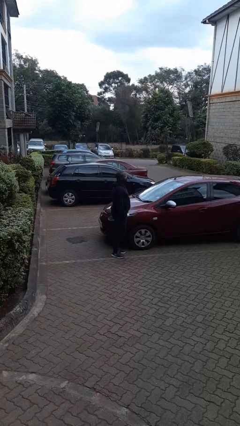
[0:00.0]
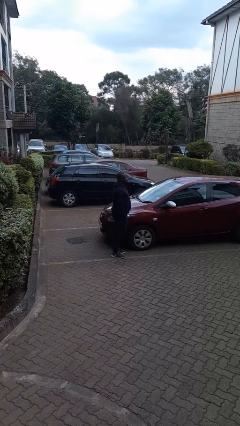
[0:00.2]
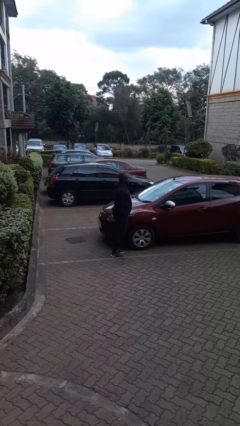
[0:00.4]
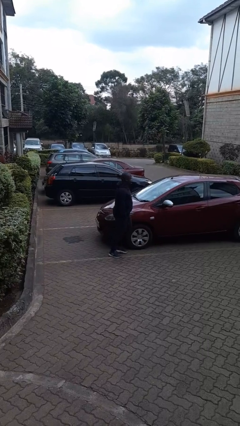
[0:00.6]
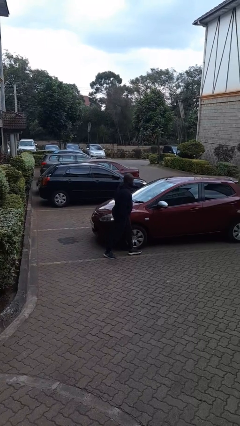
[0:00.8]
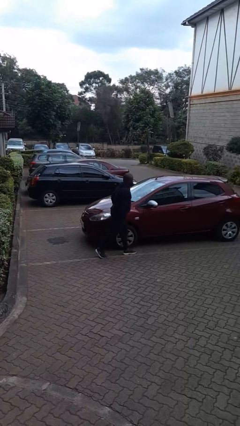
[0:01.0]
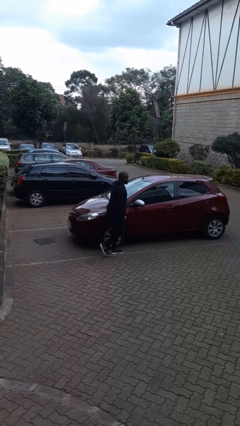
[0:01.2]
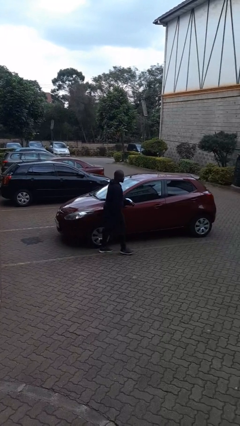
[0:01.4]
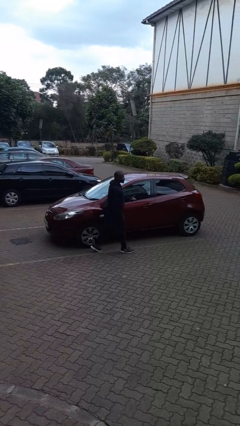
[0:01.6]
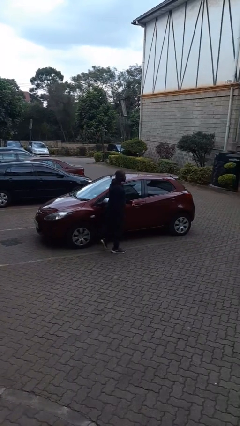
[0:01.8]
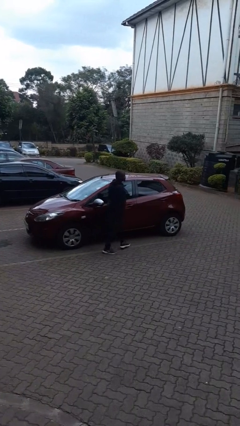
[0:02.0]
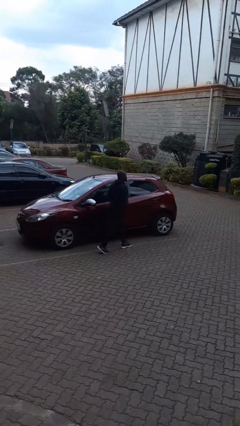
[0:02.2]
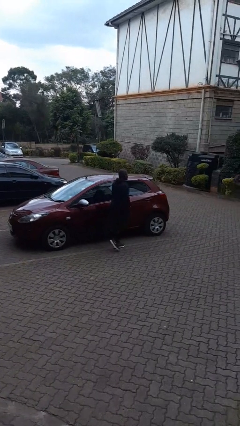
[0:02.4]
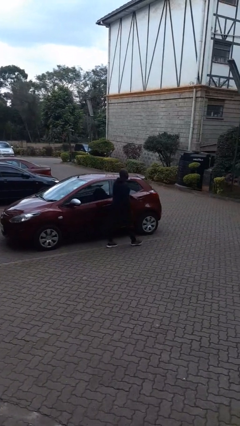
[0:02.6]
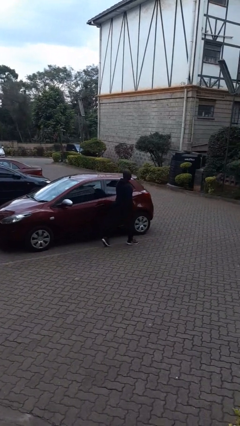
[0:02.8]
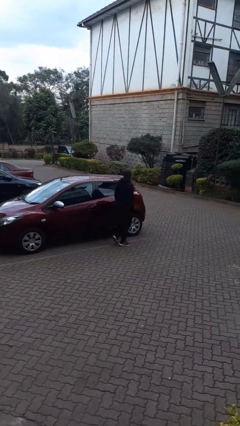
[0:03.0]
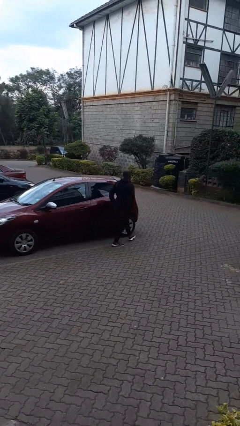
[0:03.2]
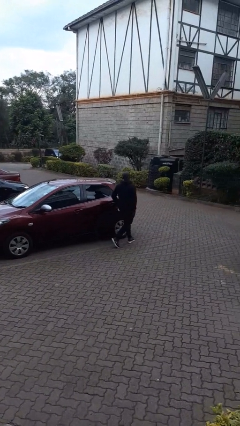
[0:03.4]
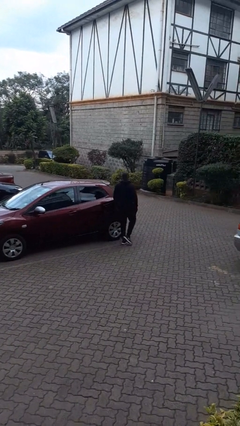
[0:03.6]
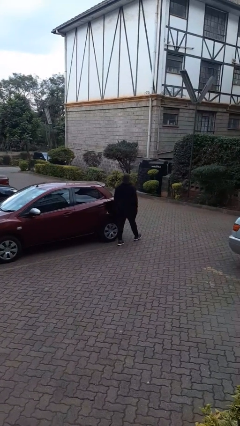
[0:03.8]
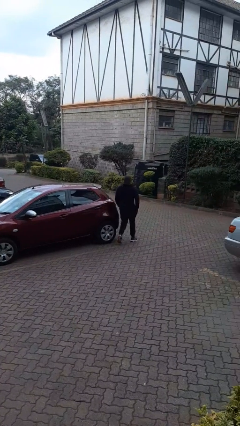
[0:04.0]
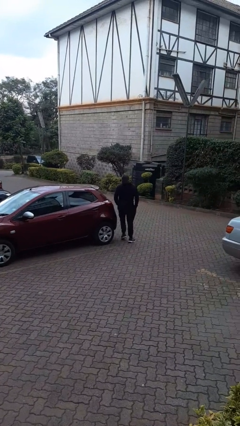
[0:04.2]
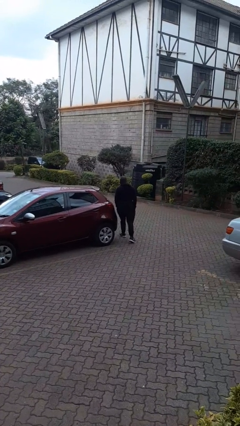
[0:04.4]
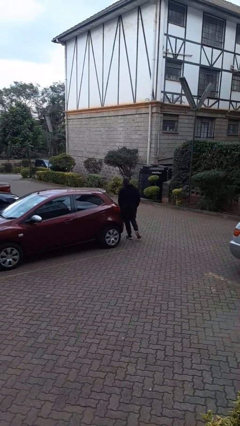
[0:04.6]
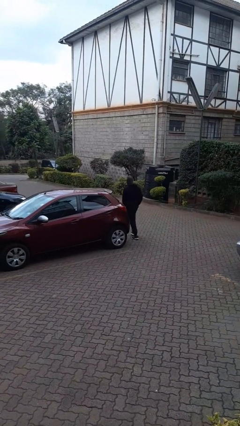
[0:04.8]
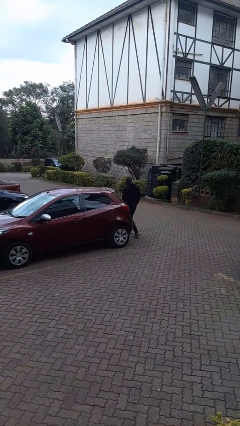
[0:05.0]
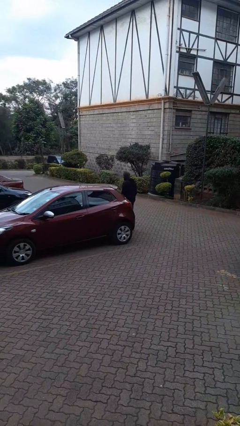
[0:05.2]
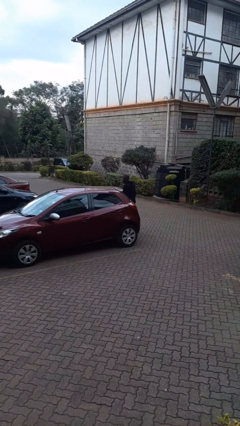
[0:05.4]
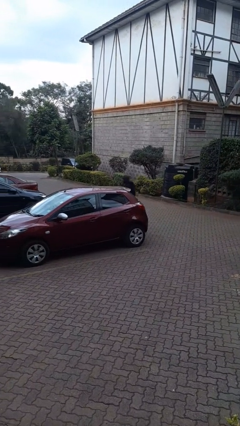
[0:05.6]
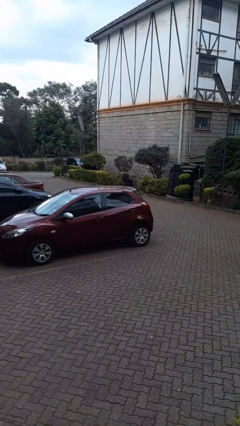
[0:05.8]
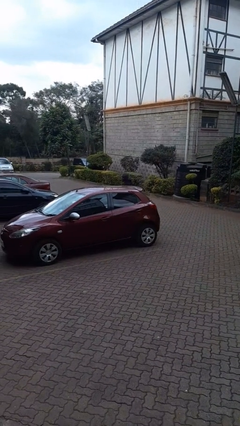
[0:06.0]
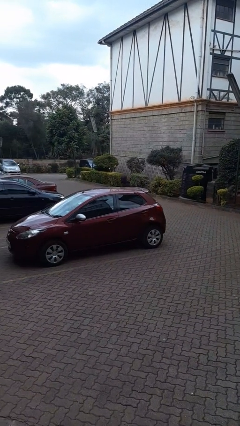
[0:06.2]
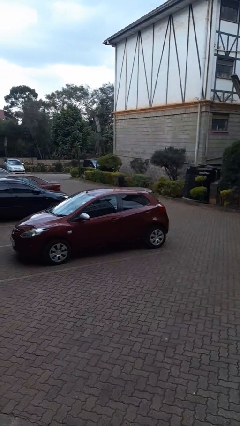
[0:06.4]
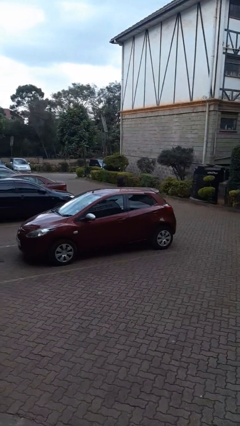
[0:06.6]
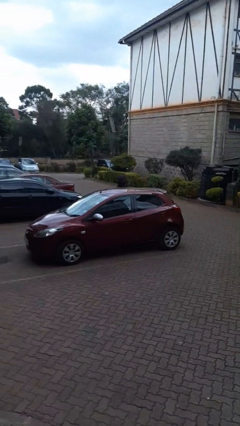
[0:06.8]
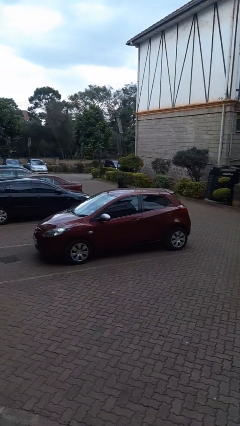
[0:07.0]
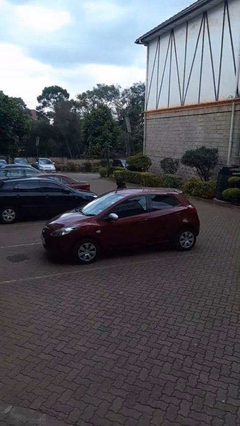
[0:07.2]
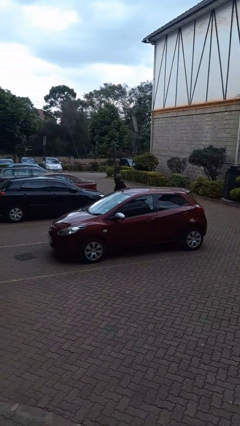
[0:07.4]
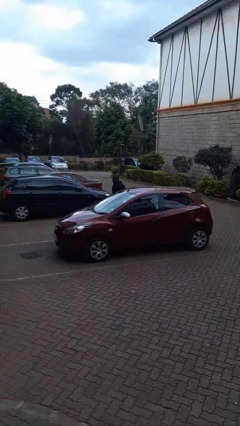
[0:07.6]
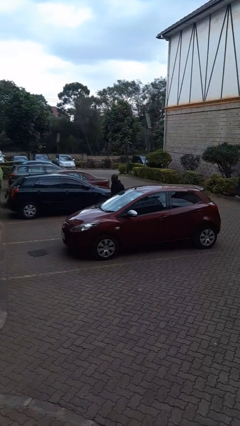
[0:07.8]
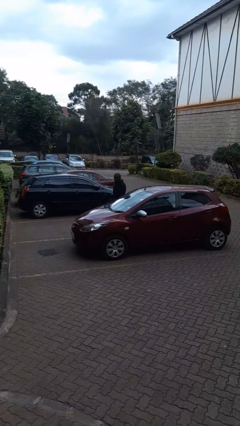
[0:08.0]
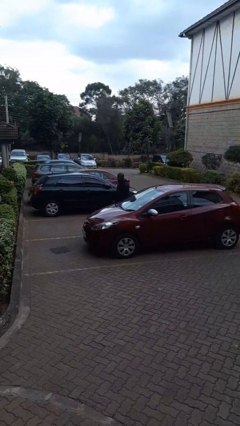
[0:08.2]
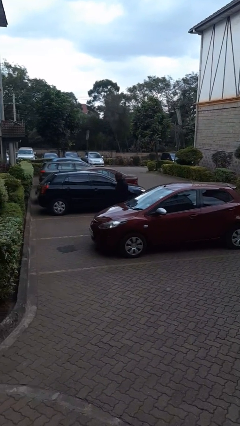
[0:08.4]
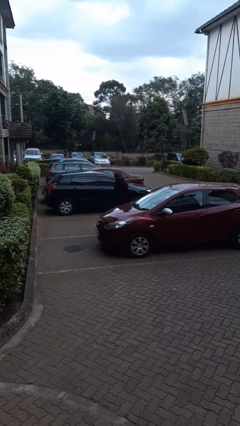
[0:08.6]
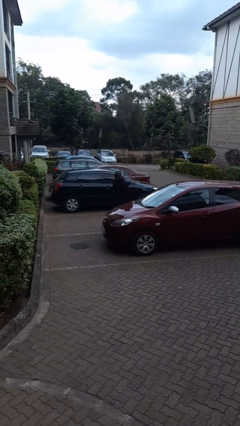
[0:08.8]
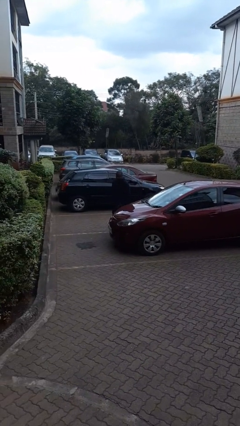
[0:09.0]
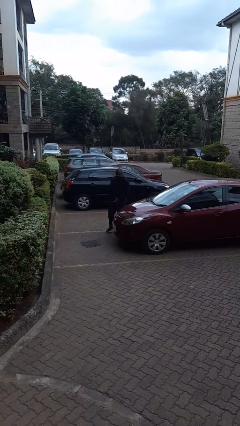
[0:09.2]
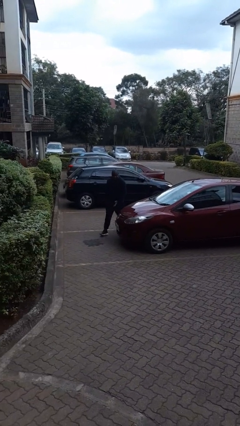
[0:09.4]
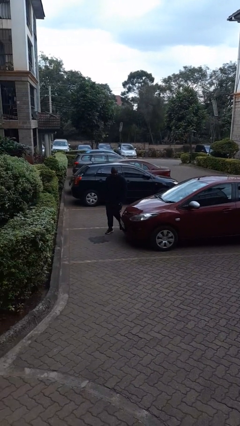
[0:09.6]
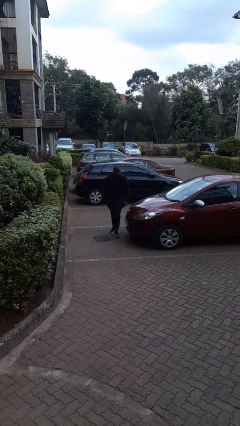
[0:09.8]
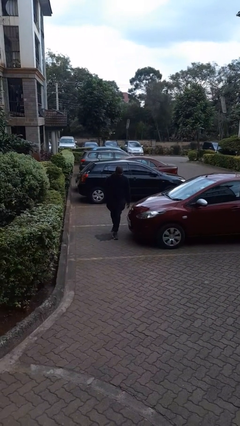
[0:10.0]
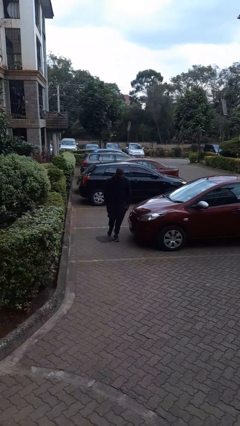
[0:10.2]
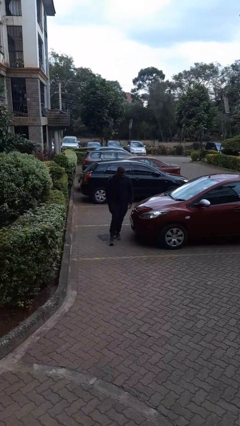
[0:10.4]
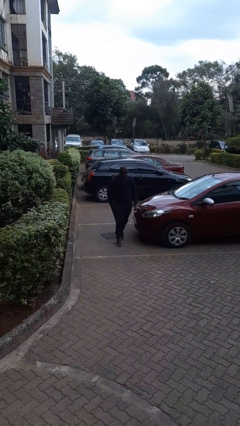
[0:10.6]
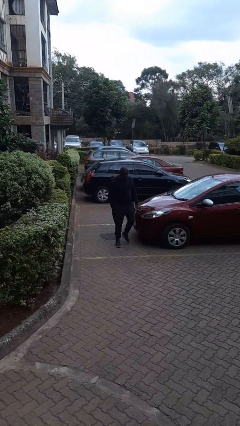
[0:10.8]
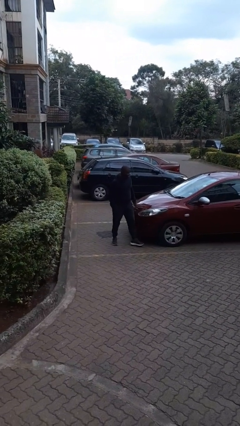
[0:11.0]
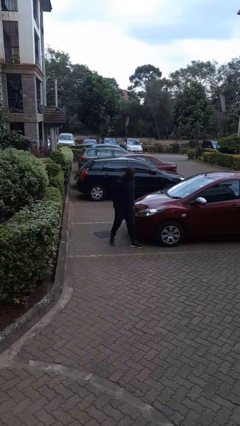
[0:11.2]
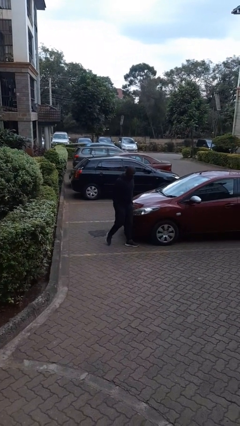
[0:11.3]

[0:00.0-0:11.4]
person walks around car

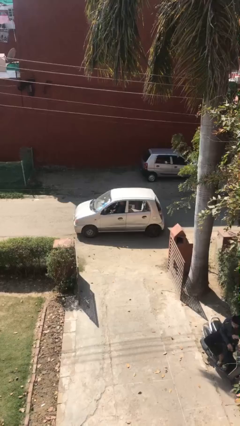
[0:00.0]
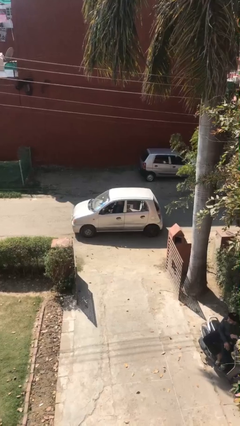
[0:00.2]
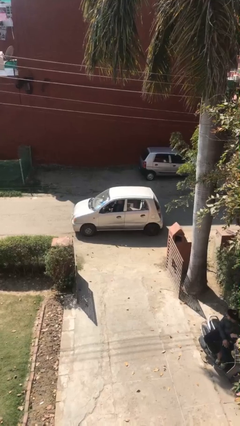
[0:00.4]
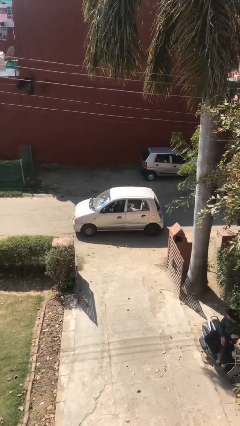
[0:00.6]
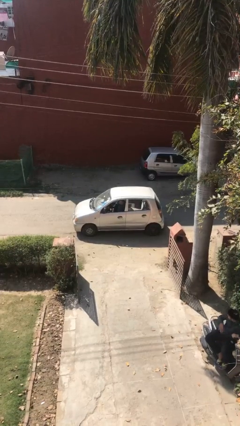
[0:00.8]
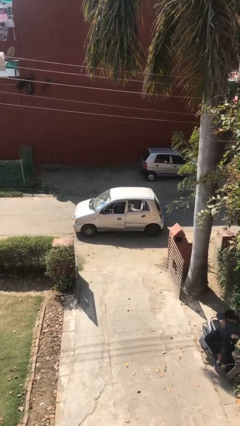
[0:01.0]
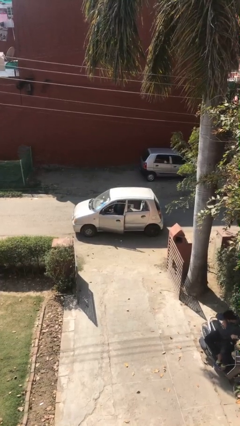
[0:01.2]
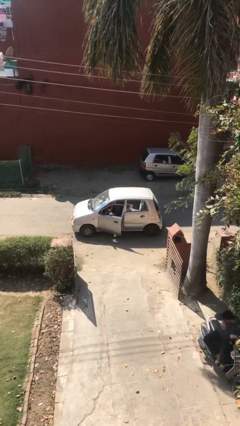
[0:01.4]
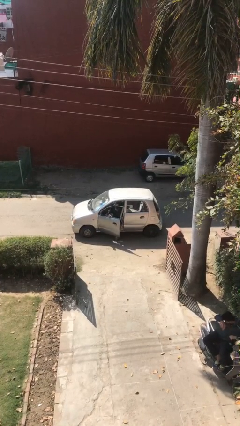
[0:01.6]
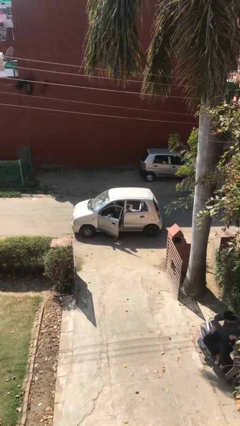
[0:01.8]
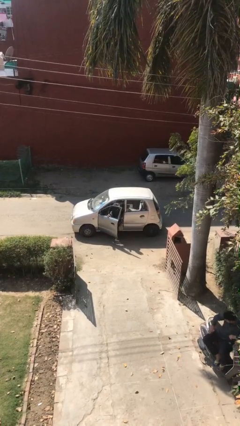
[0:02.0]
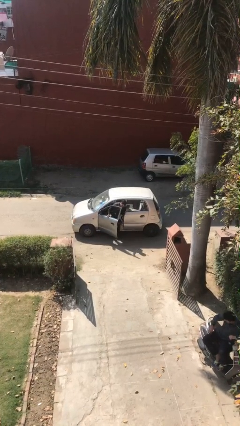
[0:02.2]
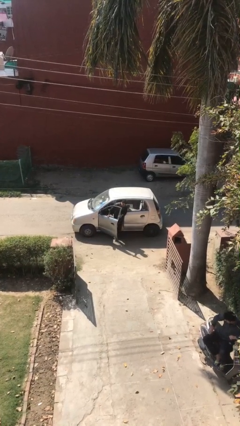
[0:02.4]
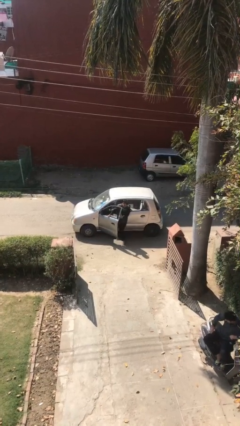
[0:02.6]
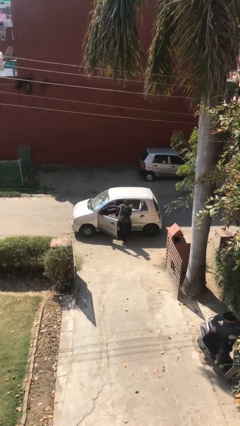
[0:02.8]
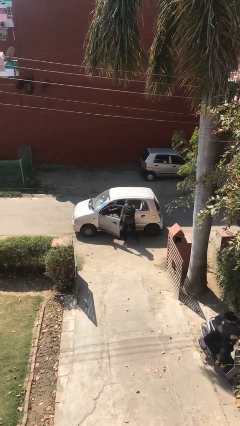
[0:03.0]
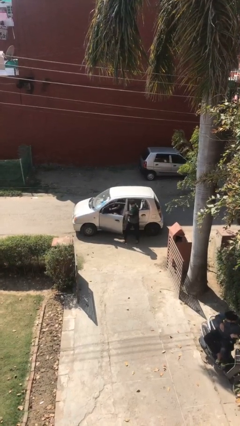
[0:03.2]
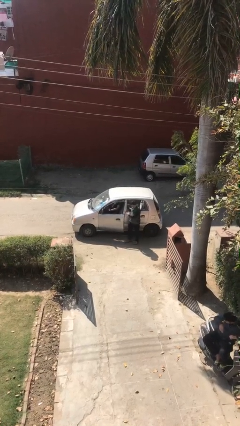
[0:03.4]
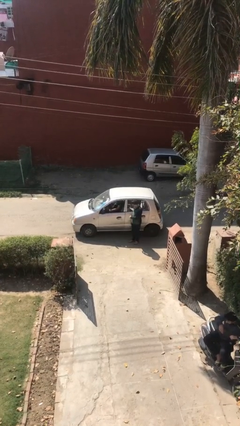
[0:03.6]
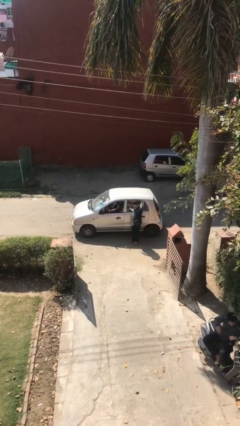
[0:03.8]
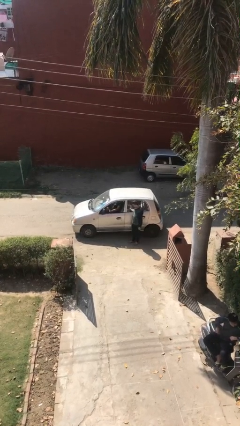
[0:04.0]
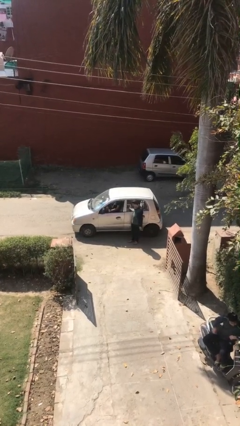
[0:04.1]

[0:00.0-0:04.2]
car drops off person

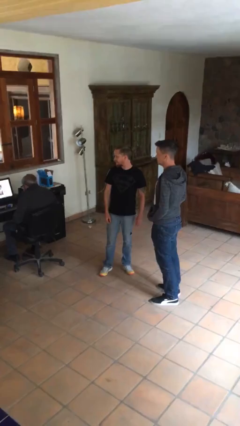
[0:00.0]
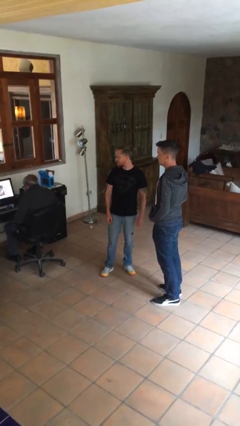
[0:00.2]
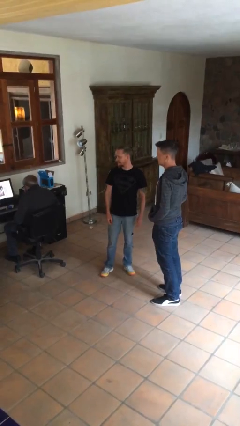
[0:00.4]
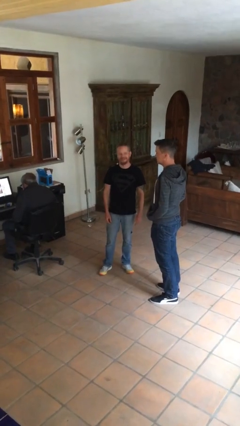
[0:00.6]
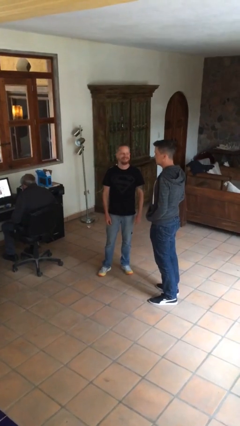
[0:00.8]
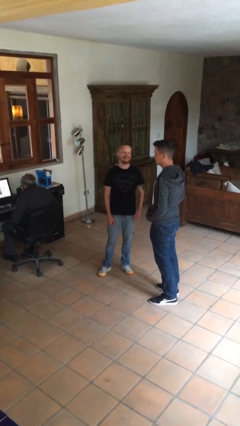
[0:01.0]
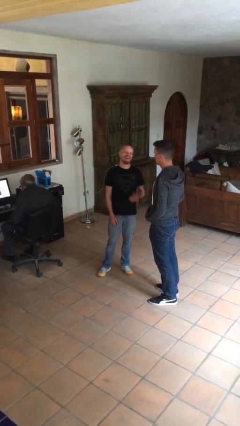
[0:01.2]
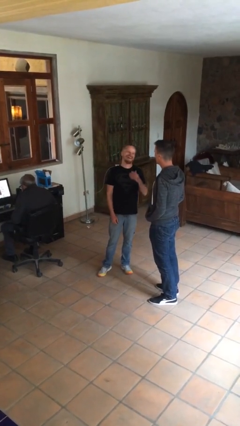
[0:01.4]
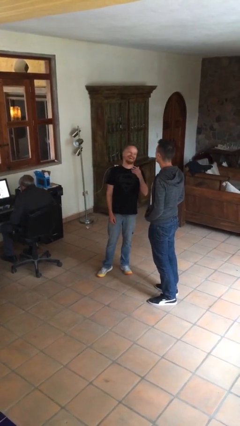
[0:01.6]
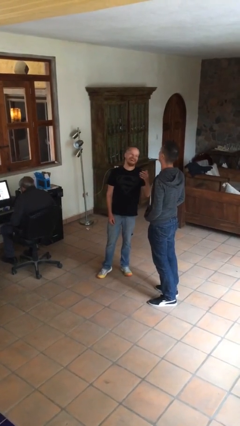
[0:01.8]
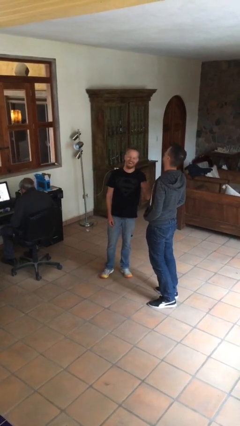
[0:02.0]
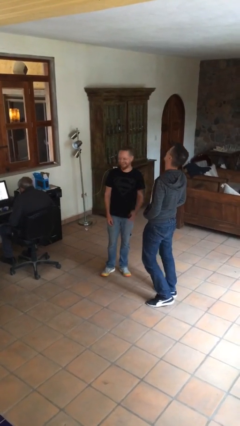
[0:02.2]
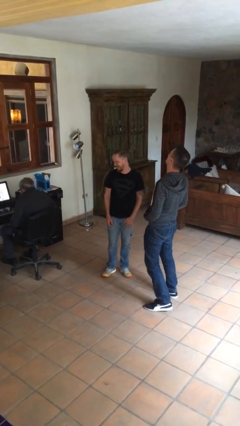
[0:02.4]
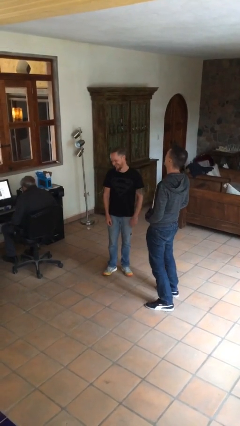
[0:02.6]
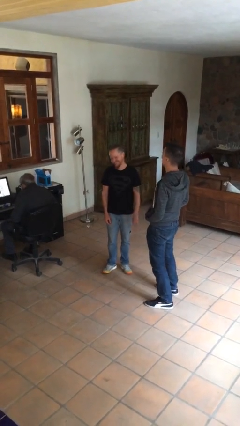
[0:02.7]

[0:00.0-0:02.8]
person laughs with person
